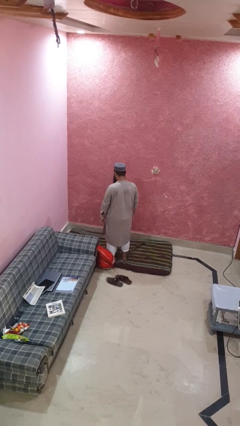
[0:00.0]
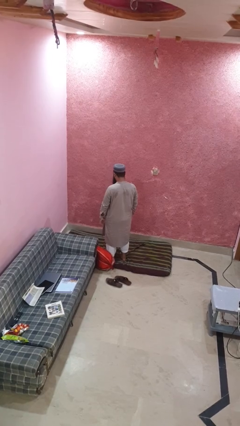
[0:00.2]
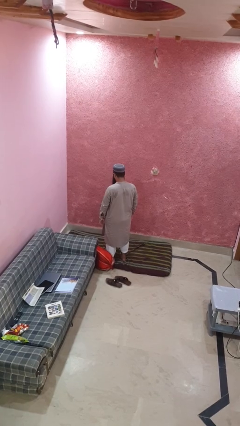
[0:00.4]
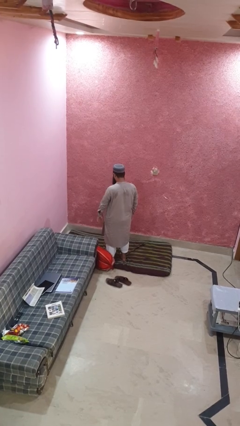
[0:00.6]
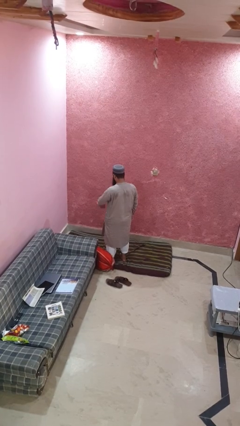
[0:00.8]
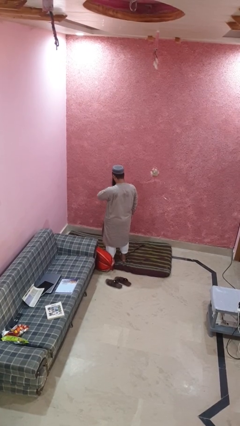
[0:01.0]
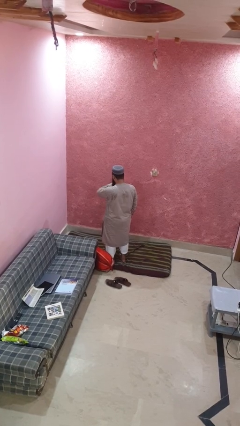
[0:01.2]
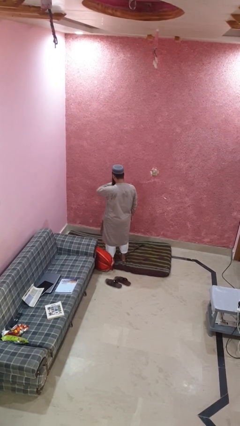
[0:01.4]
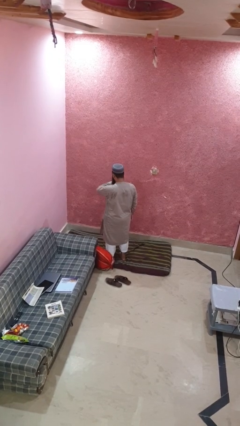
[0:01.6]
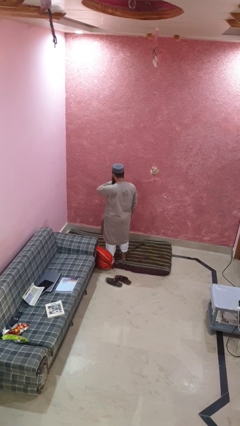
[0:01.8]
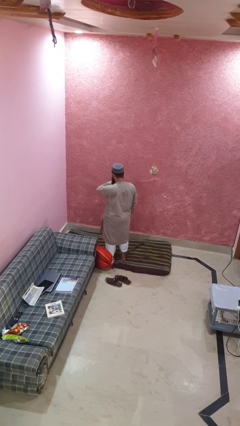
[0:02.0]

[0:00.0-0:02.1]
person looks at wristwatch

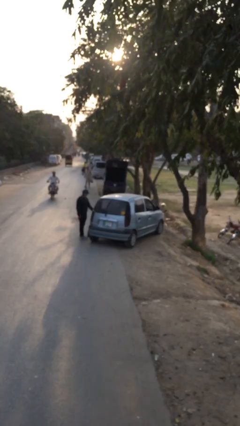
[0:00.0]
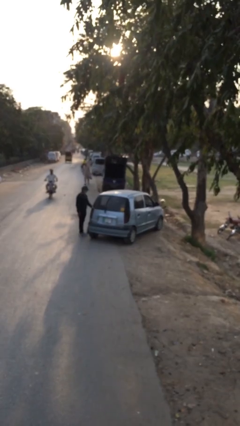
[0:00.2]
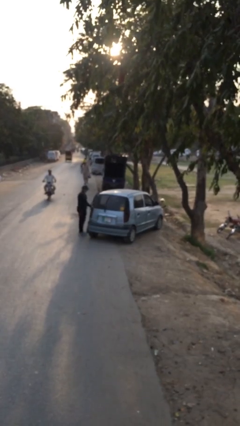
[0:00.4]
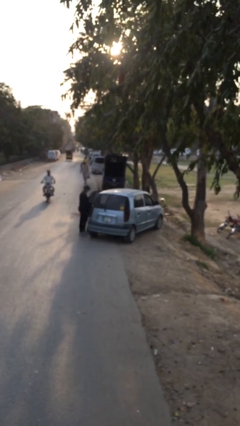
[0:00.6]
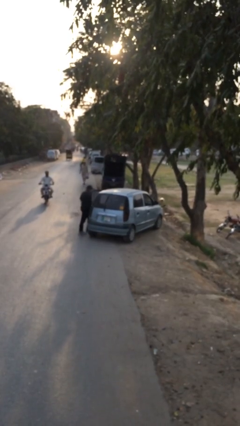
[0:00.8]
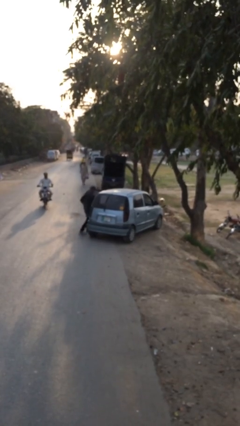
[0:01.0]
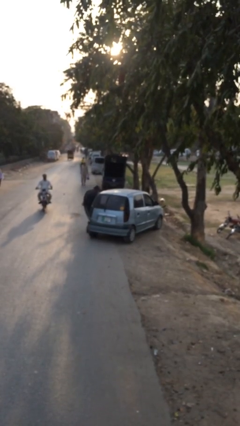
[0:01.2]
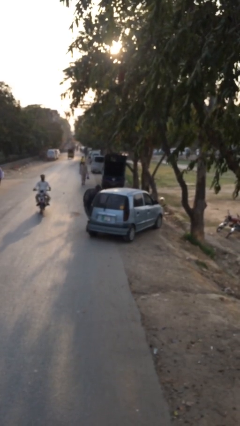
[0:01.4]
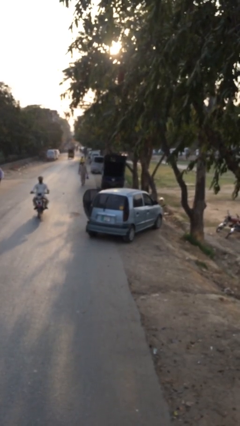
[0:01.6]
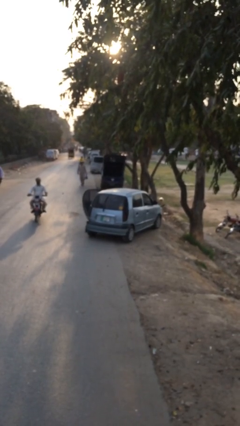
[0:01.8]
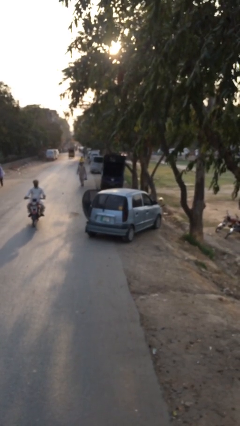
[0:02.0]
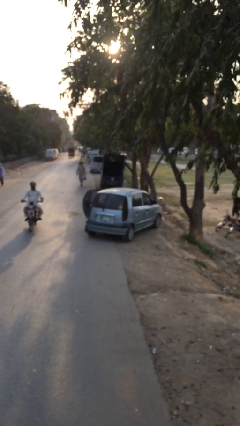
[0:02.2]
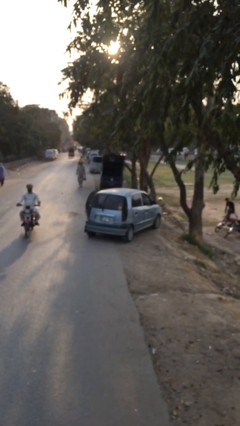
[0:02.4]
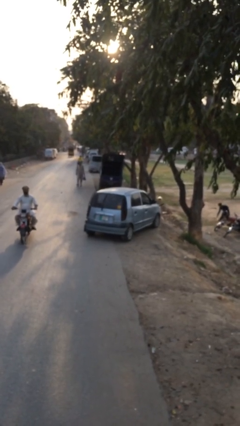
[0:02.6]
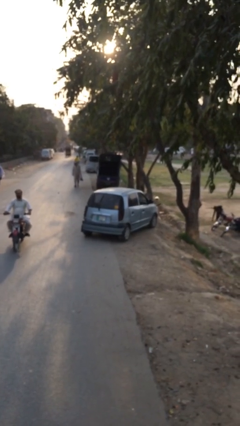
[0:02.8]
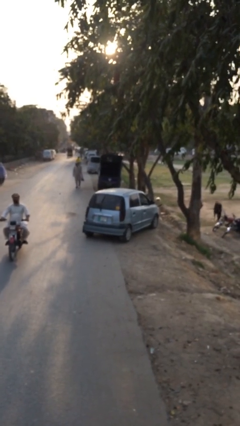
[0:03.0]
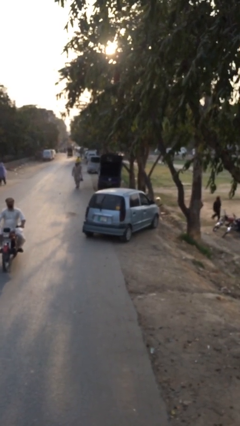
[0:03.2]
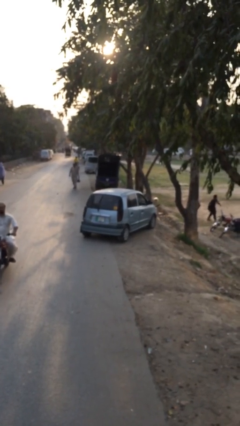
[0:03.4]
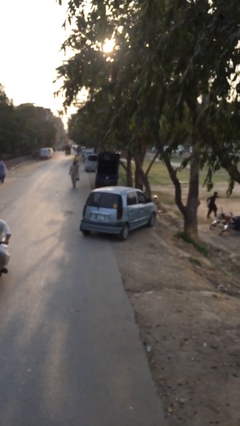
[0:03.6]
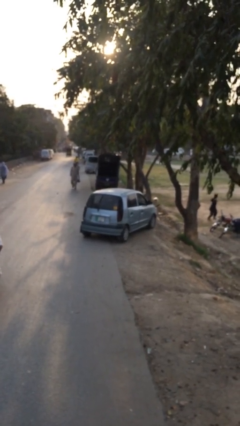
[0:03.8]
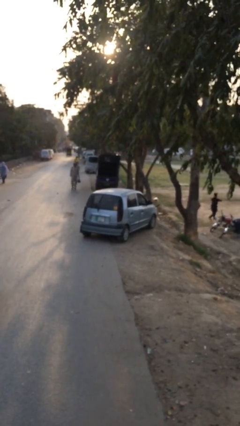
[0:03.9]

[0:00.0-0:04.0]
car picks up person

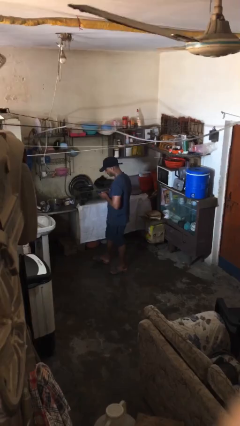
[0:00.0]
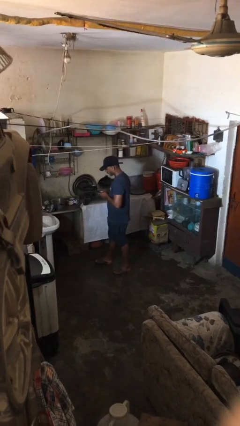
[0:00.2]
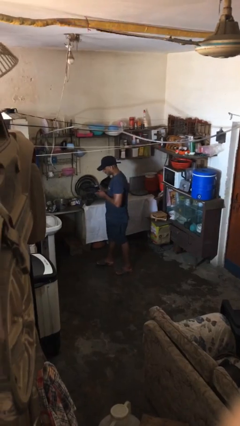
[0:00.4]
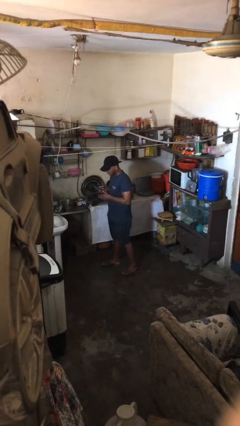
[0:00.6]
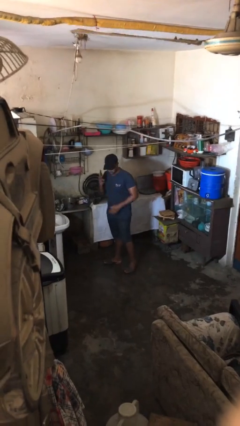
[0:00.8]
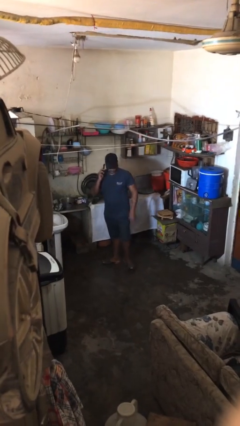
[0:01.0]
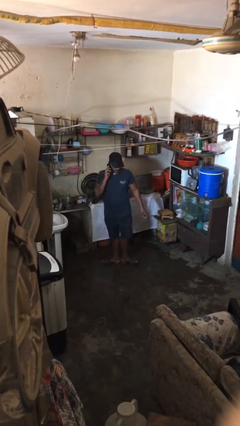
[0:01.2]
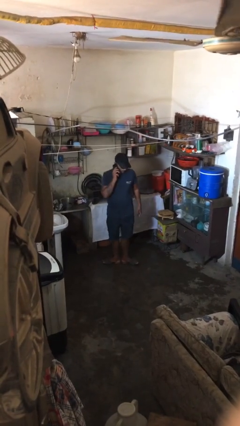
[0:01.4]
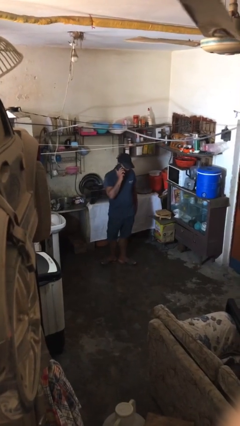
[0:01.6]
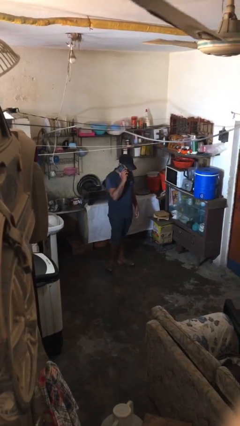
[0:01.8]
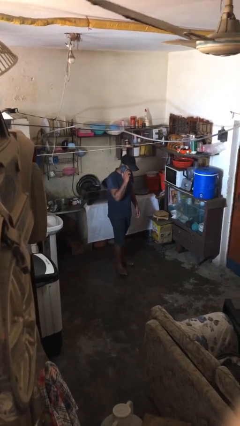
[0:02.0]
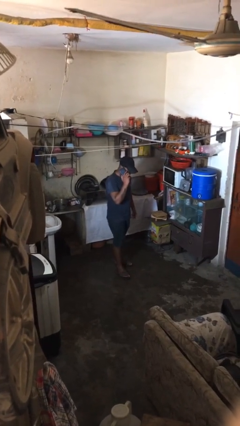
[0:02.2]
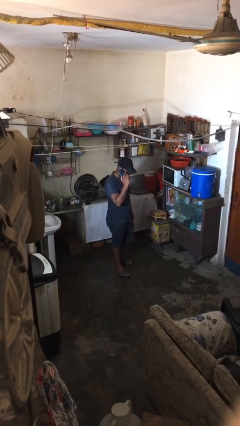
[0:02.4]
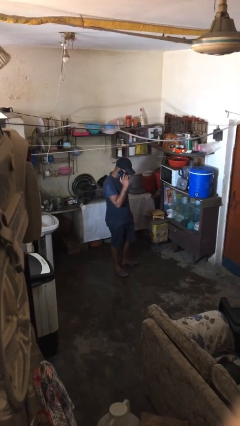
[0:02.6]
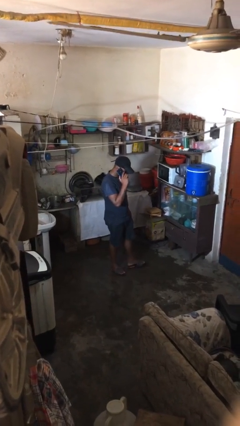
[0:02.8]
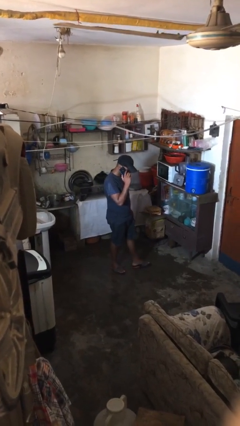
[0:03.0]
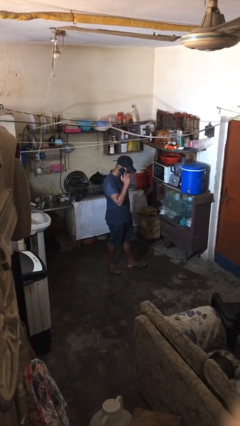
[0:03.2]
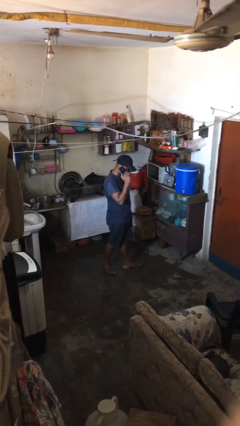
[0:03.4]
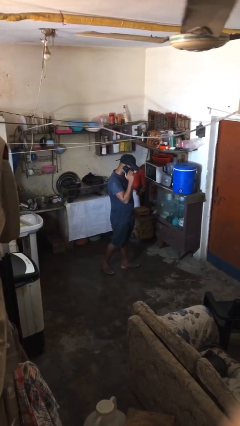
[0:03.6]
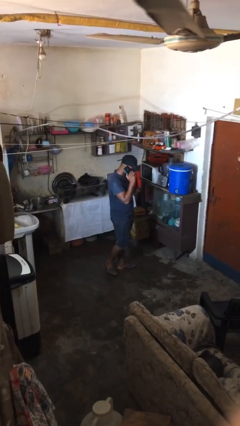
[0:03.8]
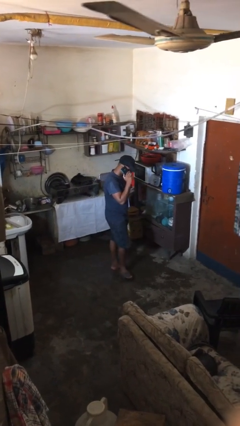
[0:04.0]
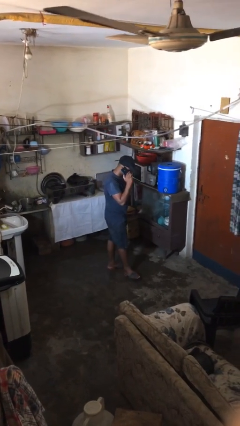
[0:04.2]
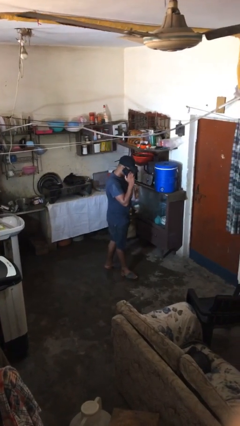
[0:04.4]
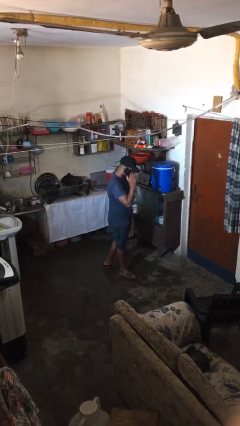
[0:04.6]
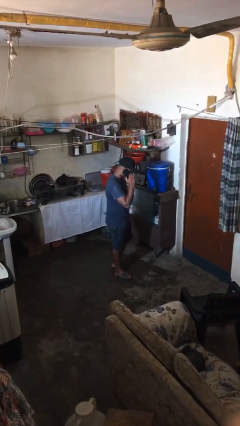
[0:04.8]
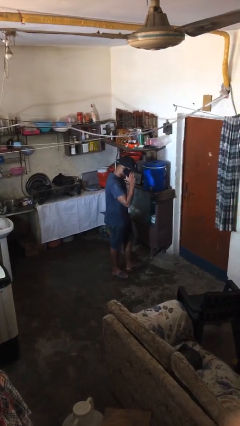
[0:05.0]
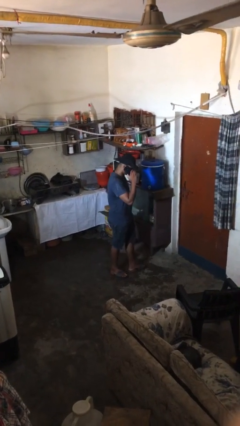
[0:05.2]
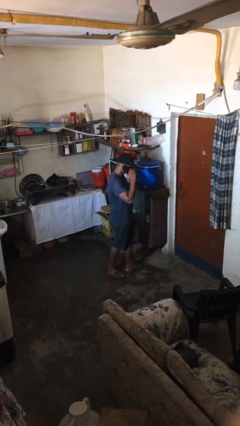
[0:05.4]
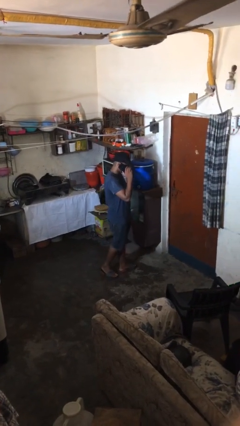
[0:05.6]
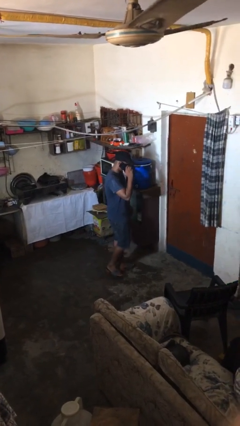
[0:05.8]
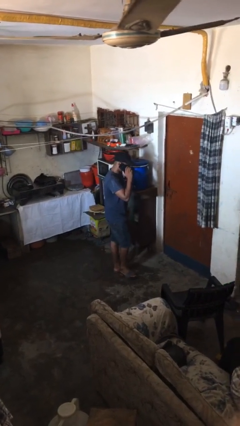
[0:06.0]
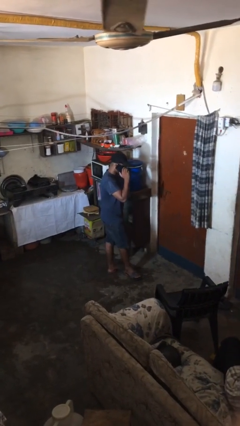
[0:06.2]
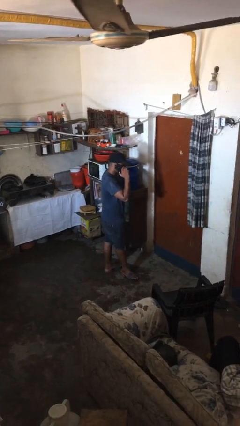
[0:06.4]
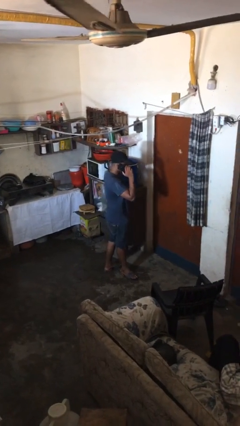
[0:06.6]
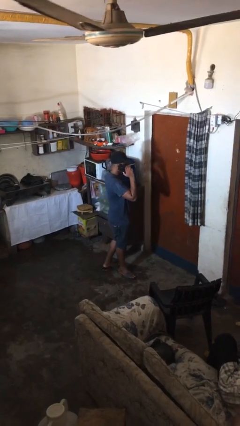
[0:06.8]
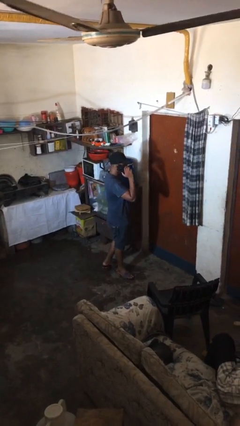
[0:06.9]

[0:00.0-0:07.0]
person talks on phone

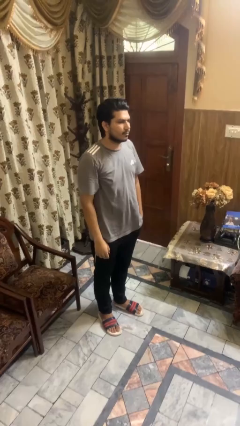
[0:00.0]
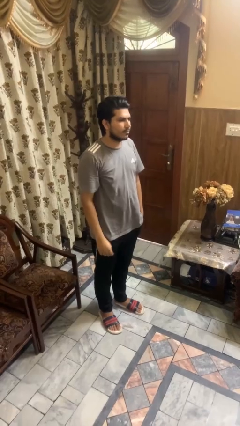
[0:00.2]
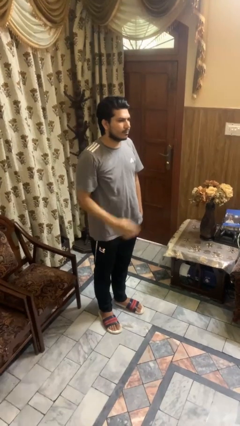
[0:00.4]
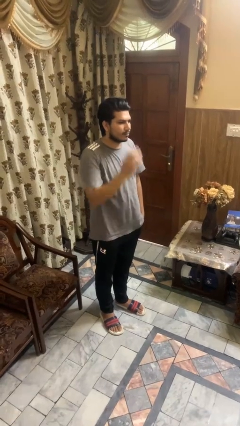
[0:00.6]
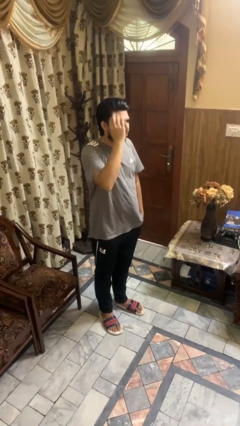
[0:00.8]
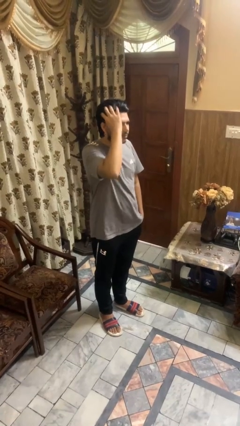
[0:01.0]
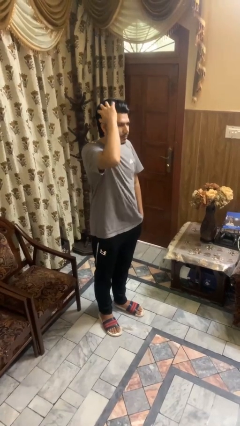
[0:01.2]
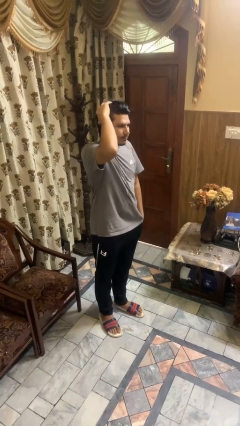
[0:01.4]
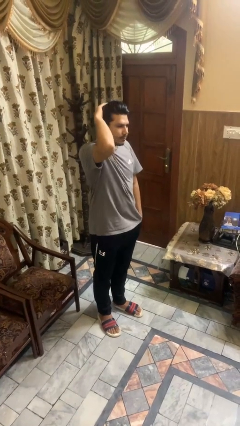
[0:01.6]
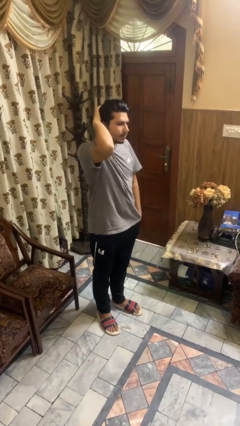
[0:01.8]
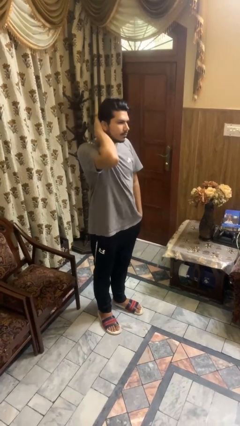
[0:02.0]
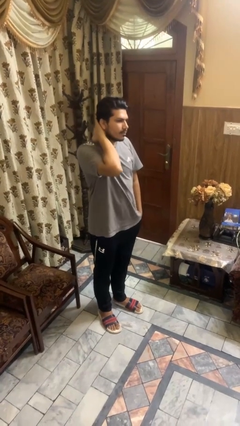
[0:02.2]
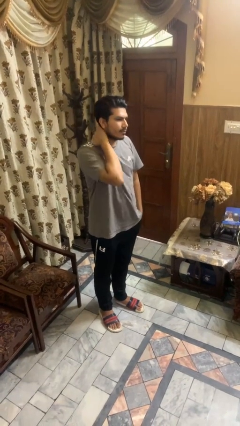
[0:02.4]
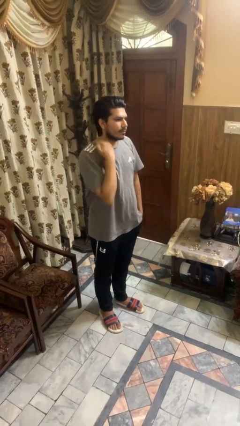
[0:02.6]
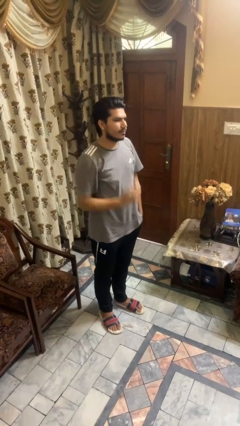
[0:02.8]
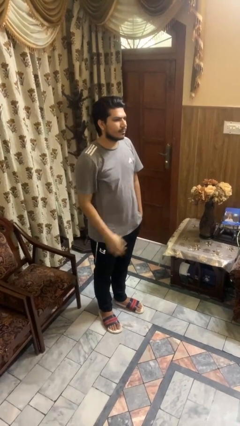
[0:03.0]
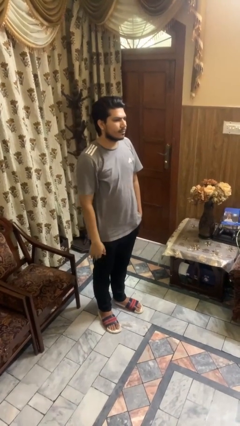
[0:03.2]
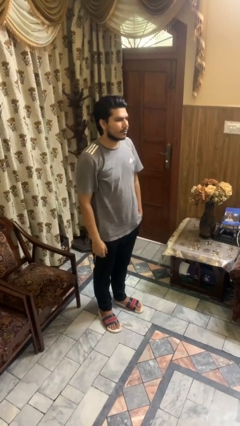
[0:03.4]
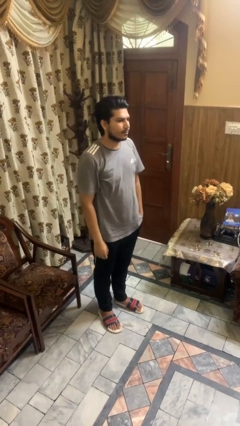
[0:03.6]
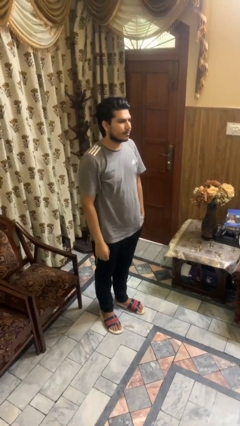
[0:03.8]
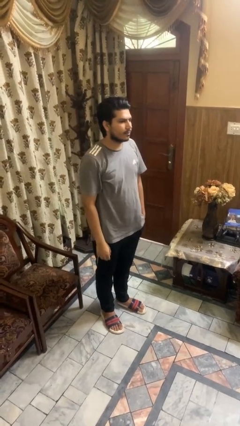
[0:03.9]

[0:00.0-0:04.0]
person strokes hair

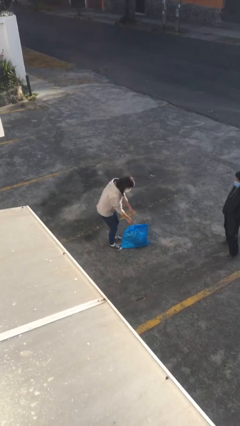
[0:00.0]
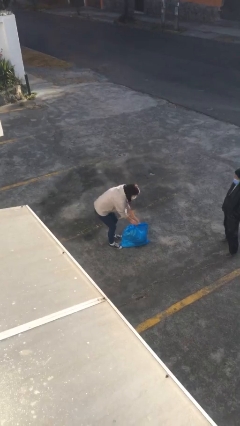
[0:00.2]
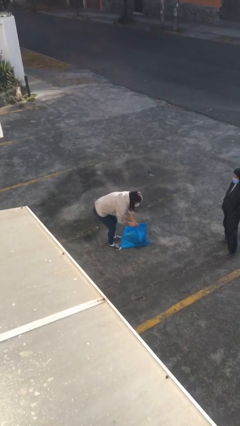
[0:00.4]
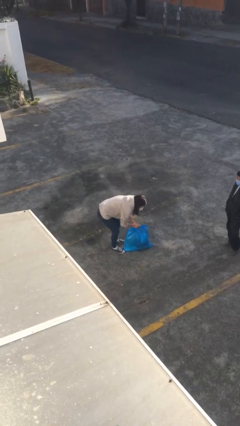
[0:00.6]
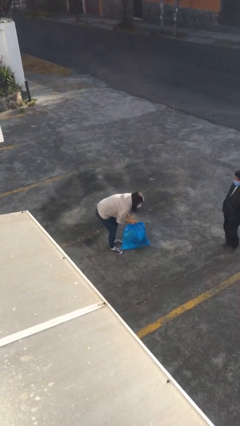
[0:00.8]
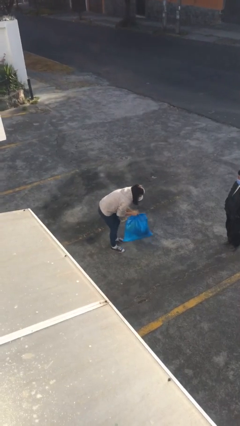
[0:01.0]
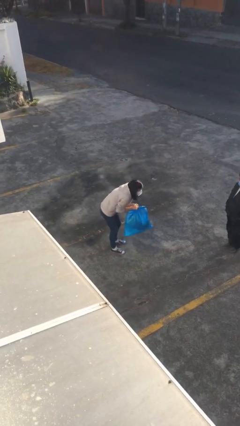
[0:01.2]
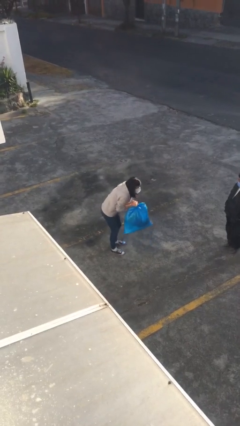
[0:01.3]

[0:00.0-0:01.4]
person picks up object from floor
